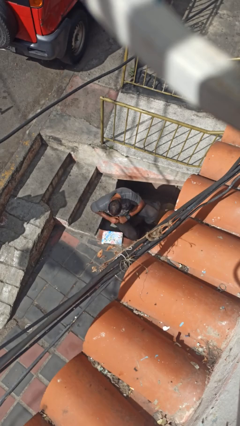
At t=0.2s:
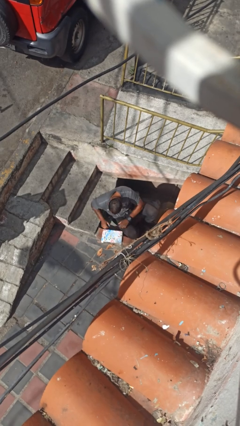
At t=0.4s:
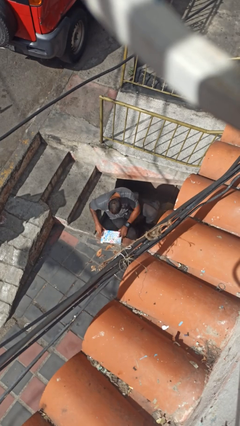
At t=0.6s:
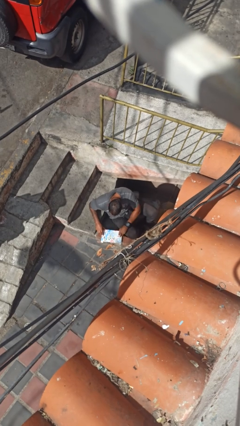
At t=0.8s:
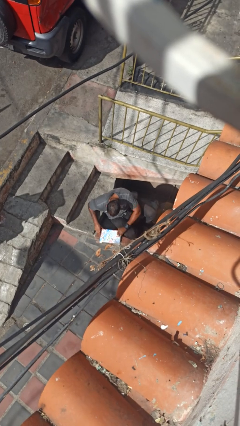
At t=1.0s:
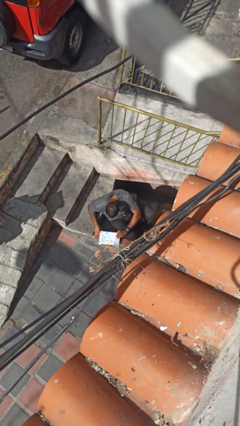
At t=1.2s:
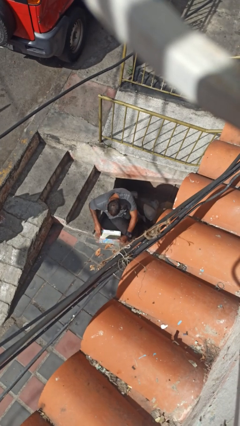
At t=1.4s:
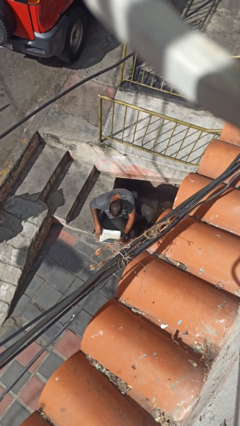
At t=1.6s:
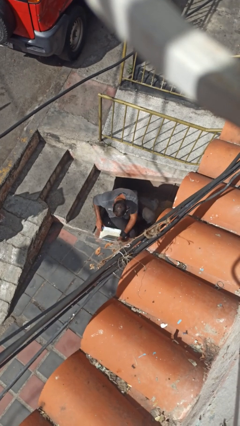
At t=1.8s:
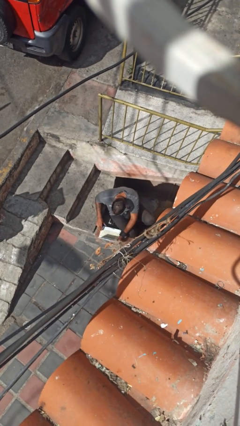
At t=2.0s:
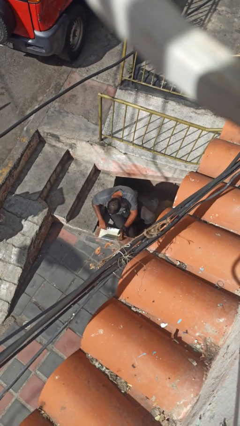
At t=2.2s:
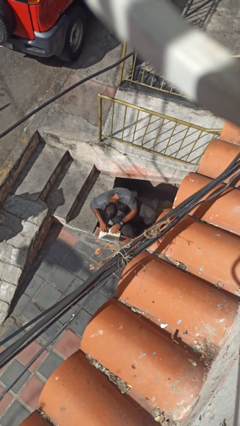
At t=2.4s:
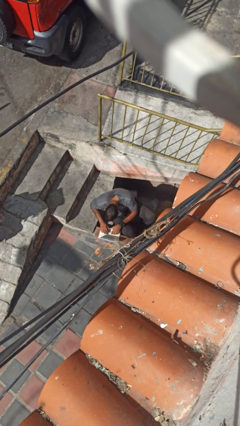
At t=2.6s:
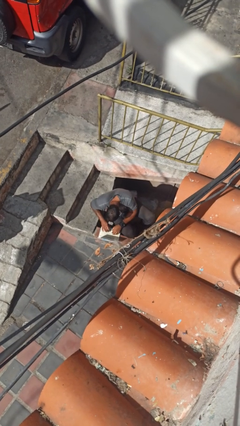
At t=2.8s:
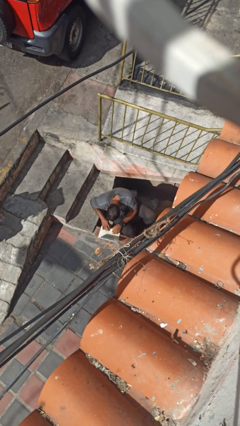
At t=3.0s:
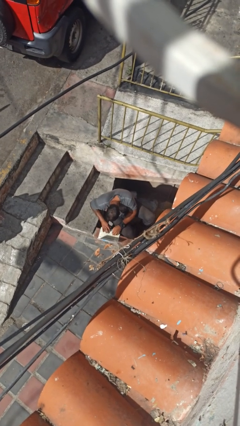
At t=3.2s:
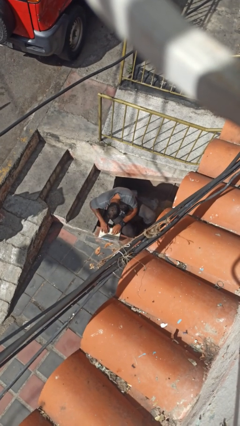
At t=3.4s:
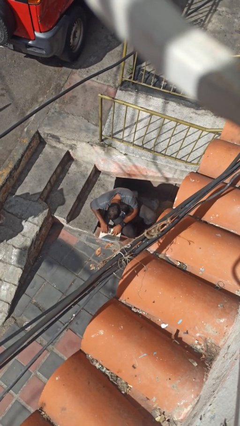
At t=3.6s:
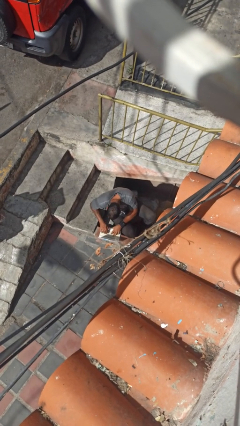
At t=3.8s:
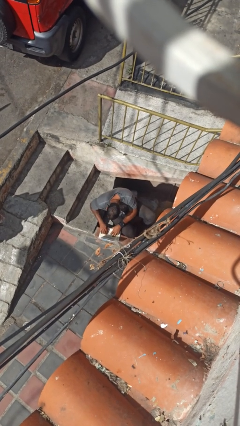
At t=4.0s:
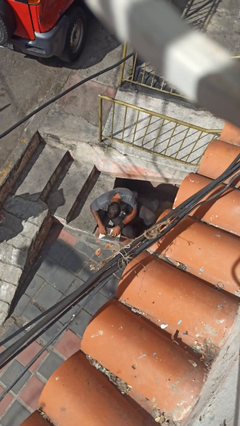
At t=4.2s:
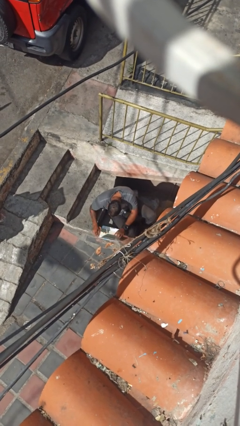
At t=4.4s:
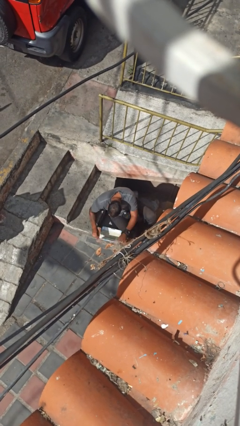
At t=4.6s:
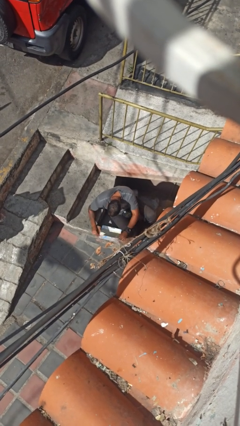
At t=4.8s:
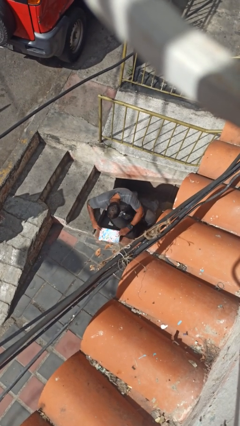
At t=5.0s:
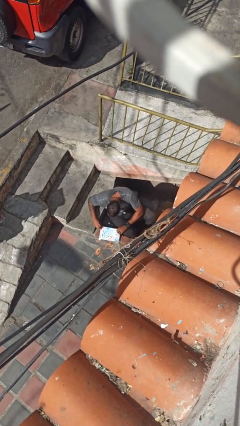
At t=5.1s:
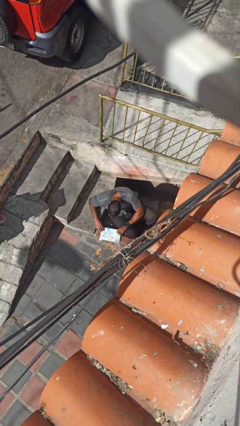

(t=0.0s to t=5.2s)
person interacts with laptop

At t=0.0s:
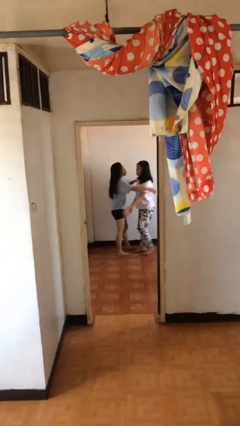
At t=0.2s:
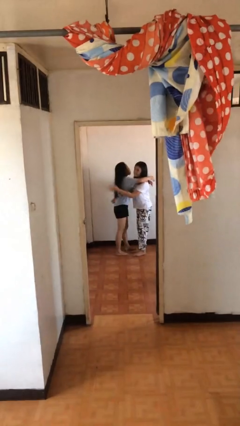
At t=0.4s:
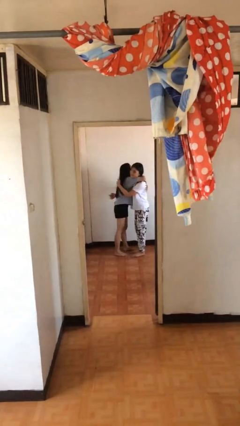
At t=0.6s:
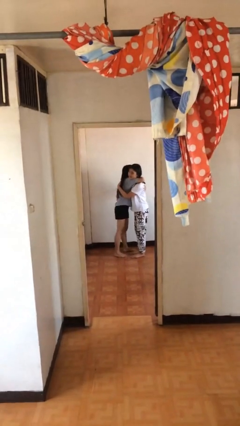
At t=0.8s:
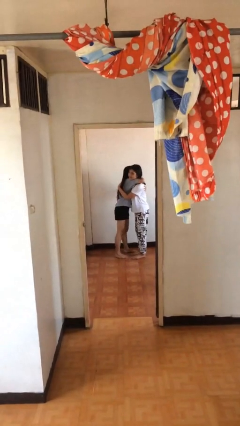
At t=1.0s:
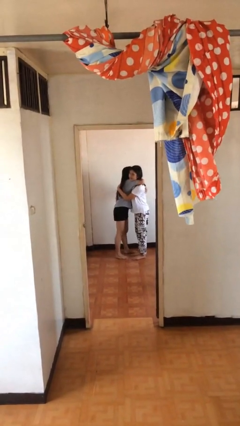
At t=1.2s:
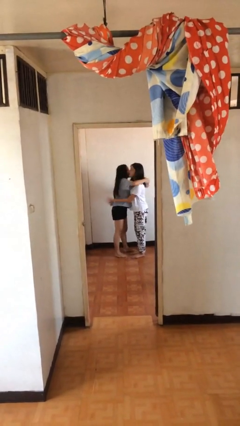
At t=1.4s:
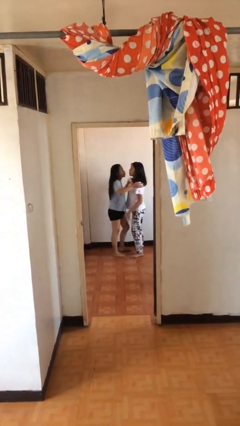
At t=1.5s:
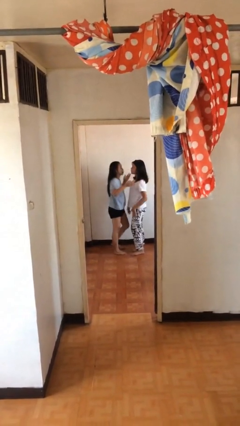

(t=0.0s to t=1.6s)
person embraces person

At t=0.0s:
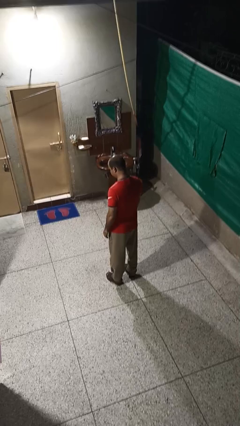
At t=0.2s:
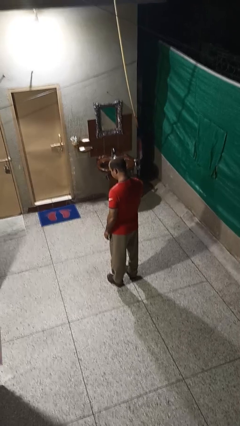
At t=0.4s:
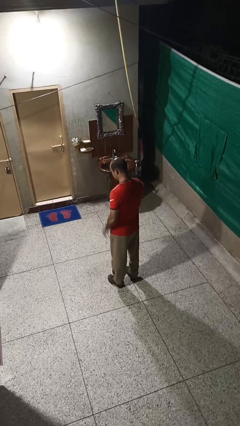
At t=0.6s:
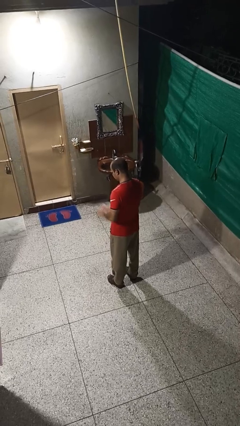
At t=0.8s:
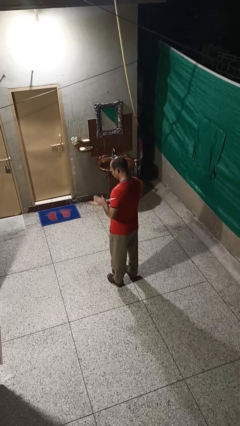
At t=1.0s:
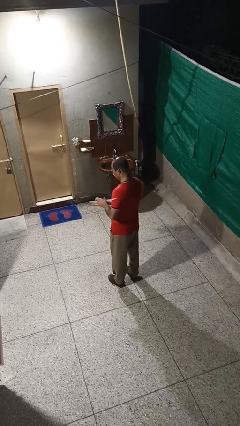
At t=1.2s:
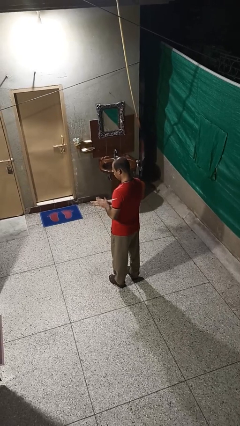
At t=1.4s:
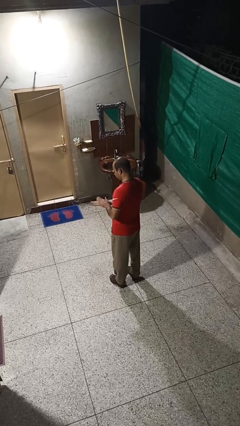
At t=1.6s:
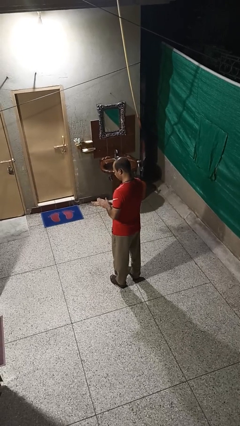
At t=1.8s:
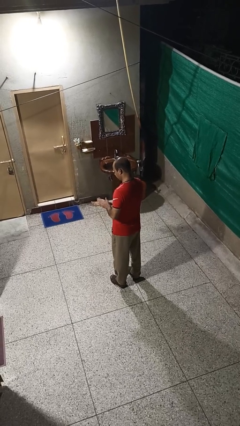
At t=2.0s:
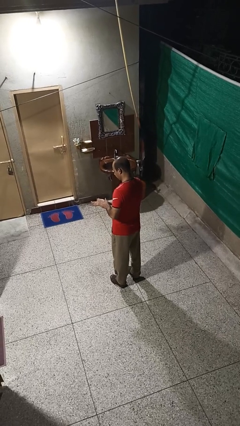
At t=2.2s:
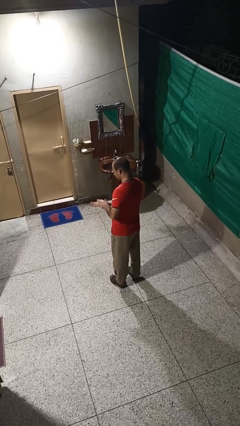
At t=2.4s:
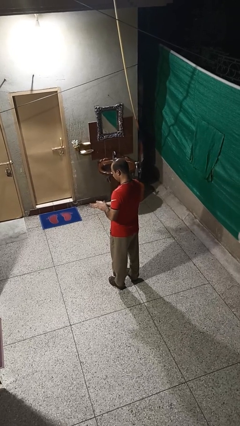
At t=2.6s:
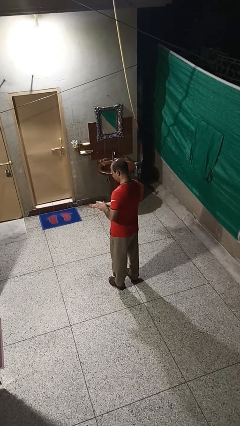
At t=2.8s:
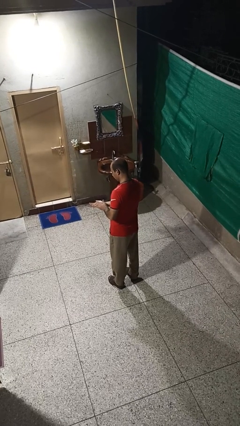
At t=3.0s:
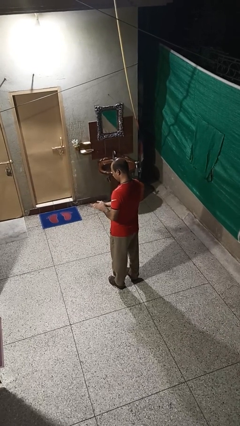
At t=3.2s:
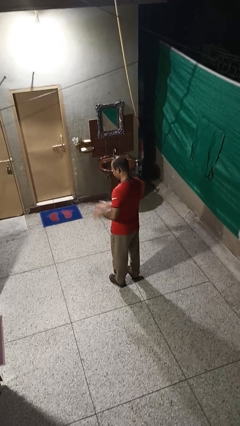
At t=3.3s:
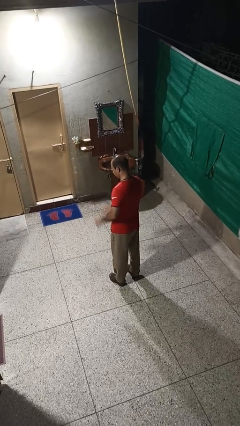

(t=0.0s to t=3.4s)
person claps hands

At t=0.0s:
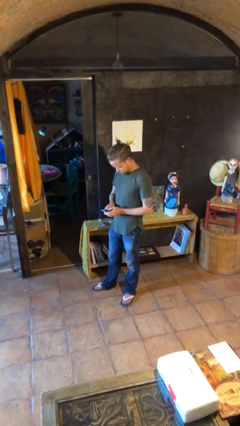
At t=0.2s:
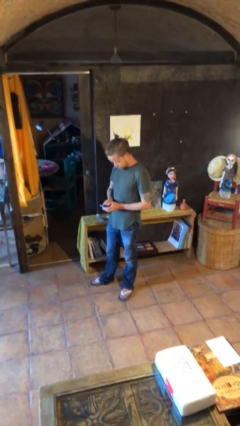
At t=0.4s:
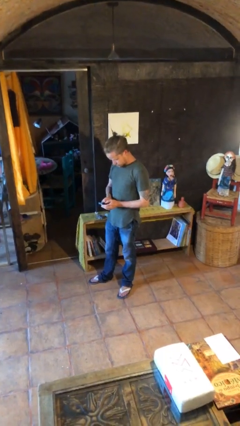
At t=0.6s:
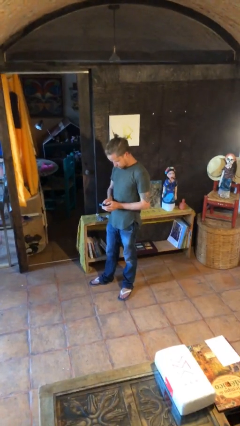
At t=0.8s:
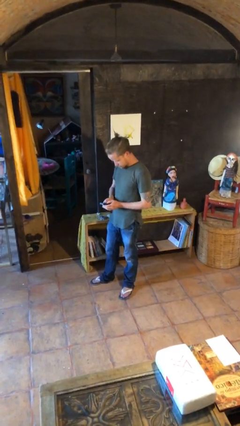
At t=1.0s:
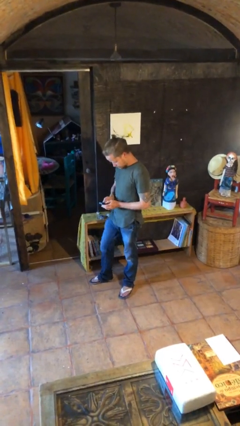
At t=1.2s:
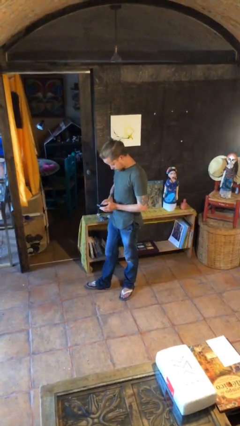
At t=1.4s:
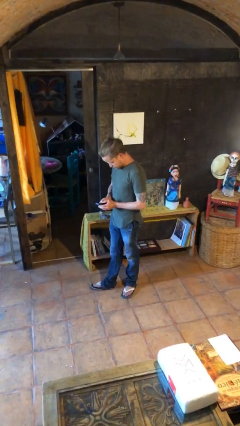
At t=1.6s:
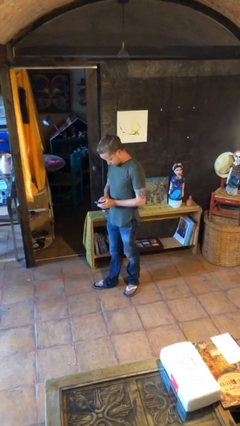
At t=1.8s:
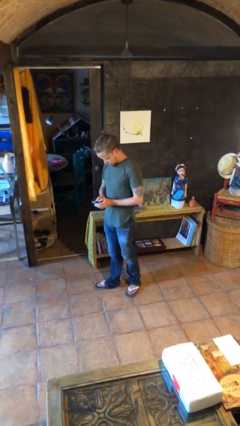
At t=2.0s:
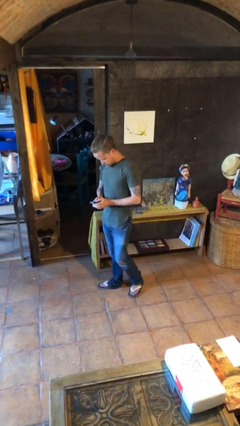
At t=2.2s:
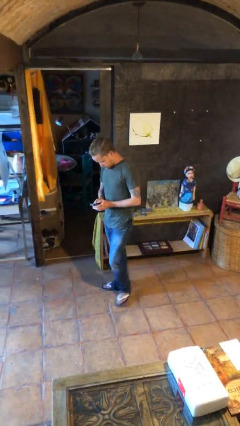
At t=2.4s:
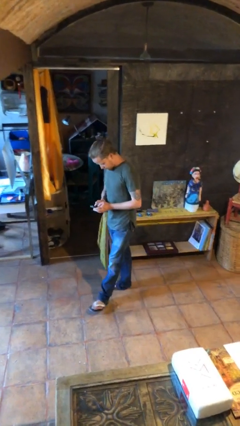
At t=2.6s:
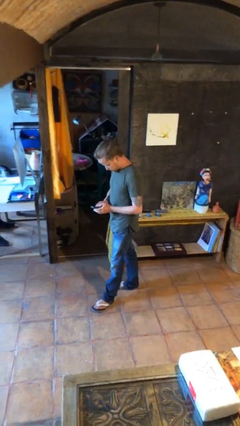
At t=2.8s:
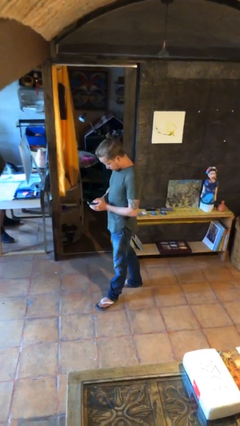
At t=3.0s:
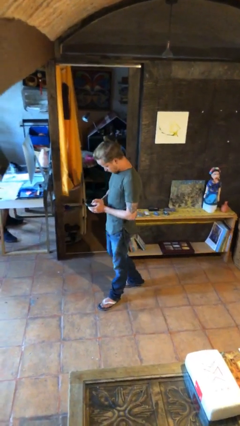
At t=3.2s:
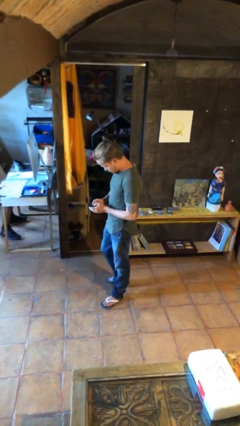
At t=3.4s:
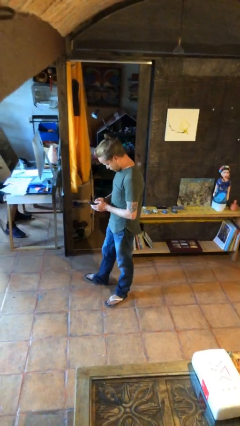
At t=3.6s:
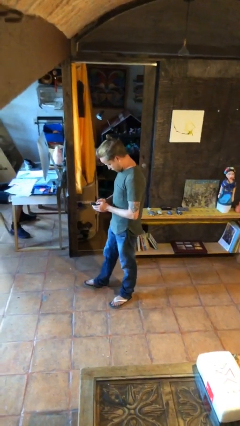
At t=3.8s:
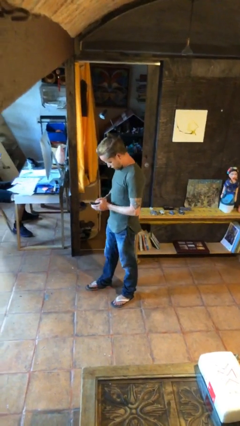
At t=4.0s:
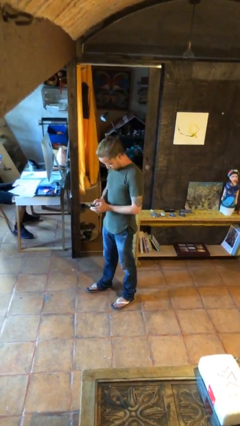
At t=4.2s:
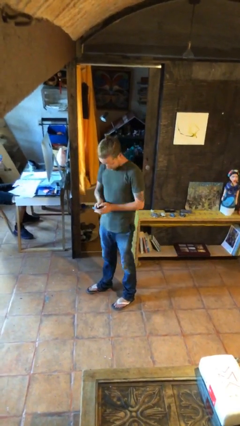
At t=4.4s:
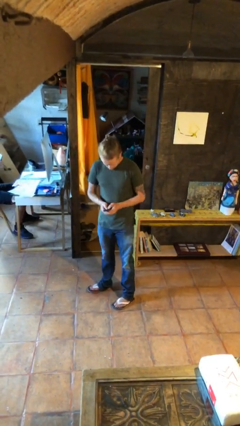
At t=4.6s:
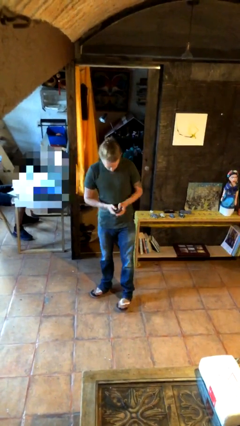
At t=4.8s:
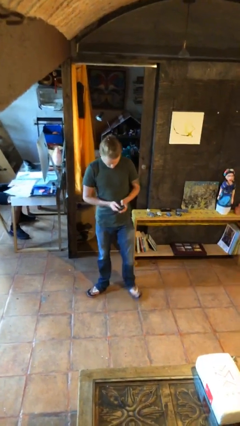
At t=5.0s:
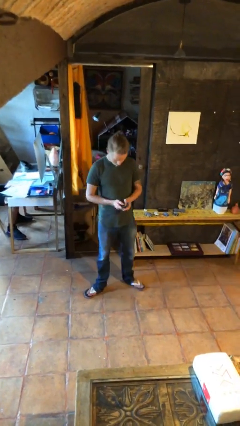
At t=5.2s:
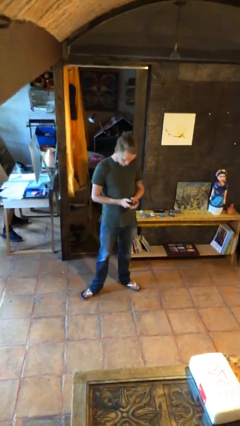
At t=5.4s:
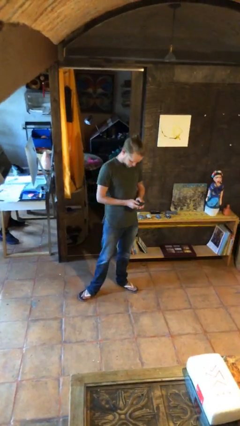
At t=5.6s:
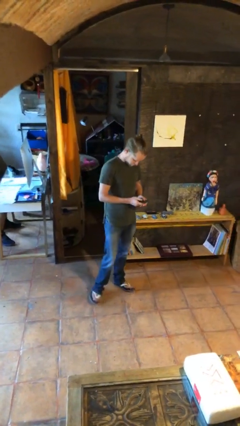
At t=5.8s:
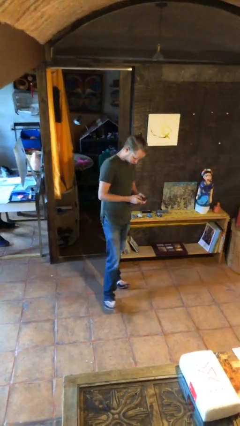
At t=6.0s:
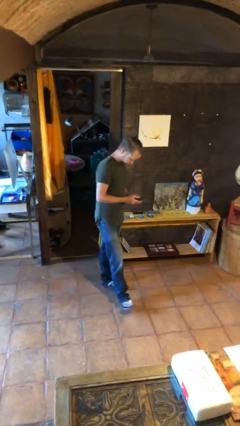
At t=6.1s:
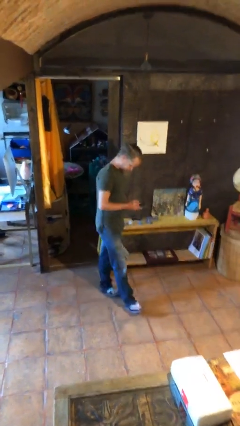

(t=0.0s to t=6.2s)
person texts on phone

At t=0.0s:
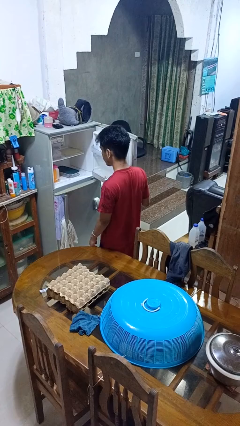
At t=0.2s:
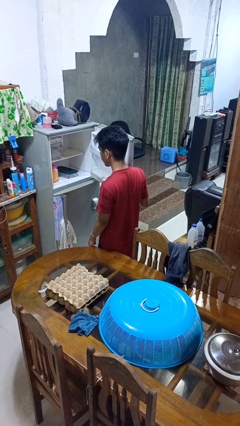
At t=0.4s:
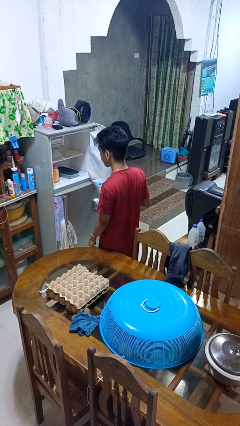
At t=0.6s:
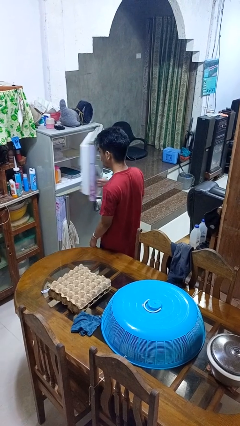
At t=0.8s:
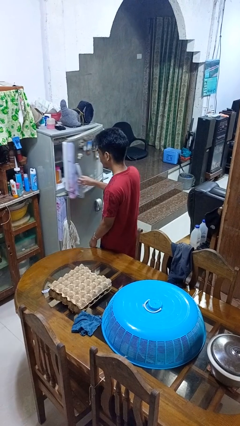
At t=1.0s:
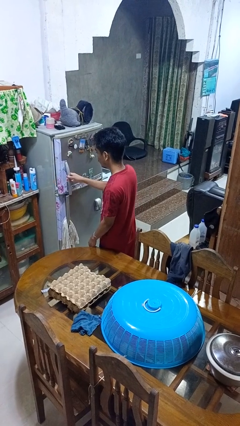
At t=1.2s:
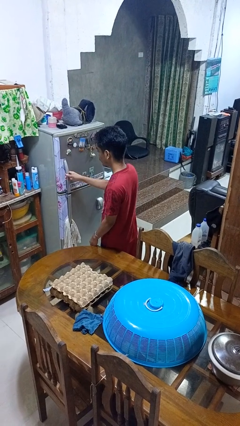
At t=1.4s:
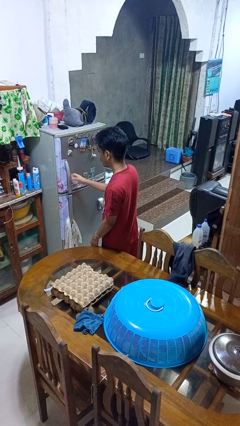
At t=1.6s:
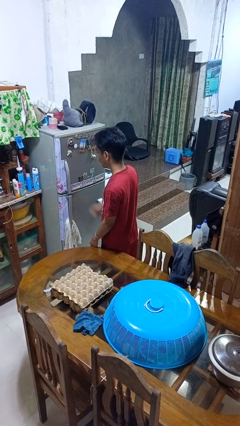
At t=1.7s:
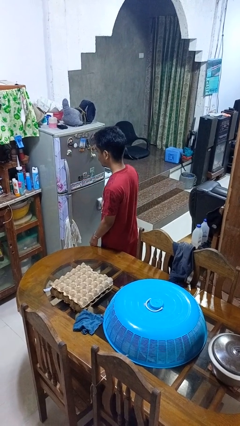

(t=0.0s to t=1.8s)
person closes refrigerator
